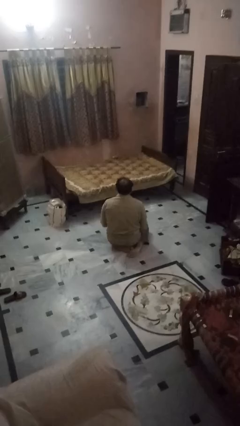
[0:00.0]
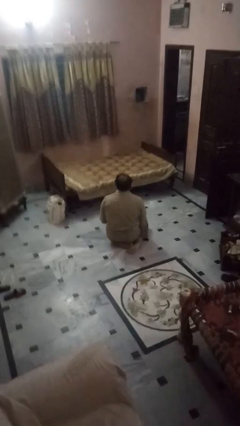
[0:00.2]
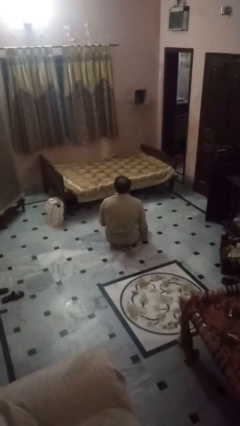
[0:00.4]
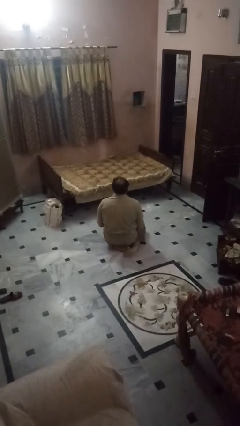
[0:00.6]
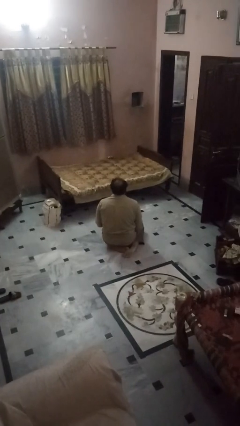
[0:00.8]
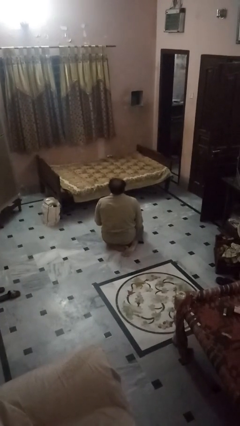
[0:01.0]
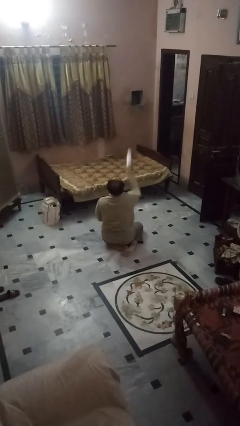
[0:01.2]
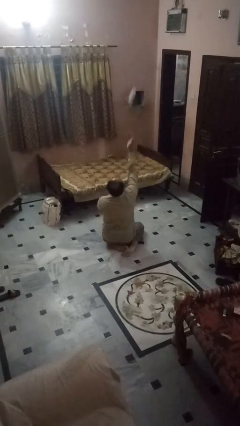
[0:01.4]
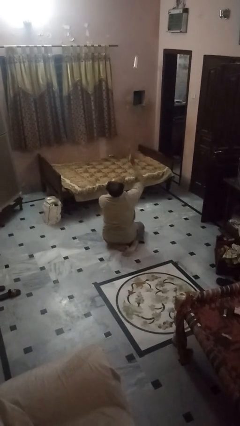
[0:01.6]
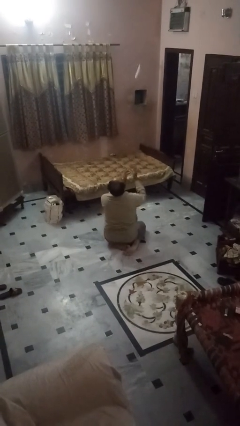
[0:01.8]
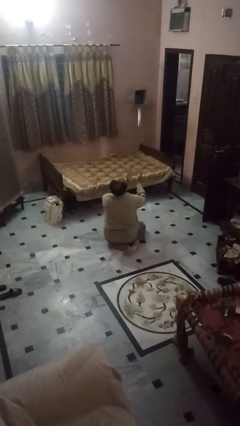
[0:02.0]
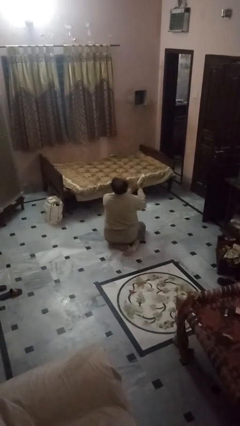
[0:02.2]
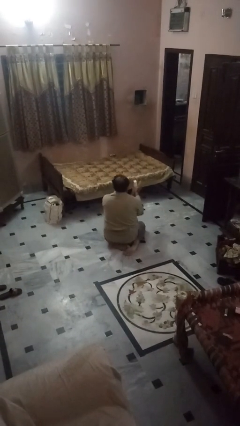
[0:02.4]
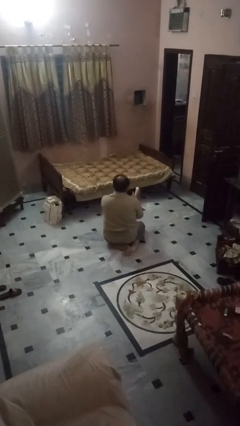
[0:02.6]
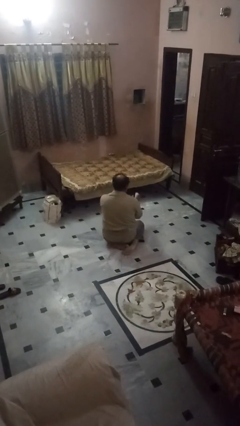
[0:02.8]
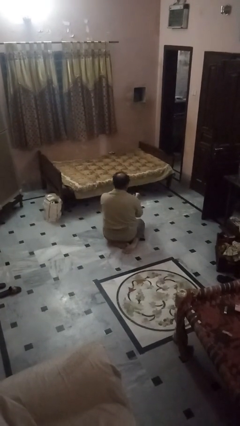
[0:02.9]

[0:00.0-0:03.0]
person drops object

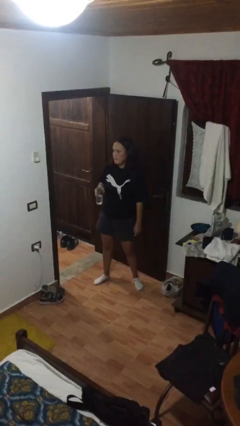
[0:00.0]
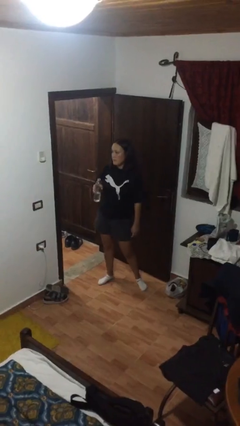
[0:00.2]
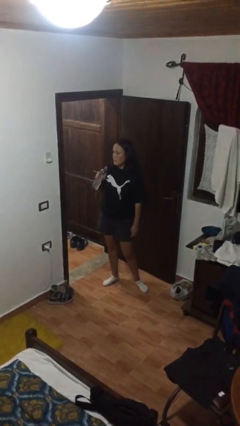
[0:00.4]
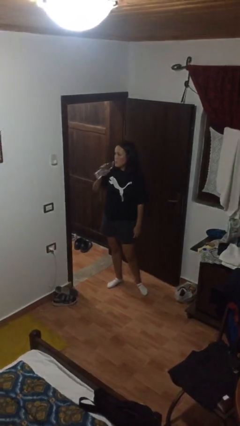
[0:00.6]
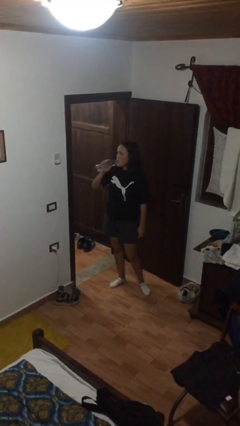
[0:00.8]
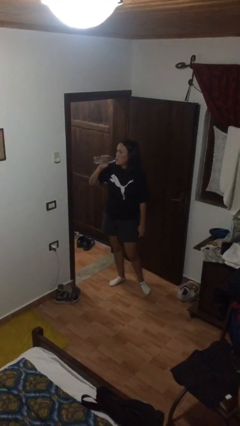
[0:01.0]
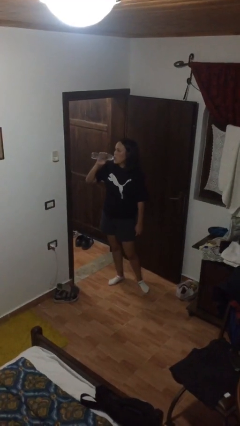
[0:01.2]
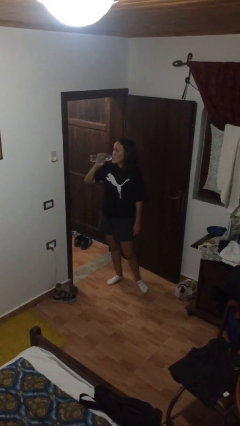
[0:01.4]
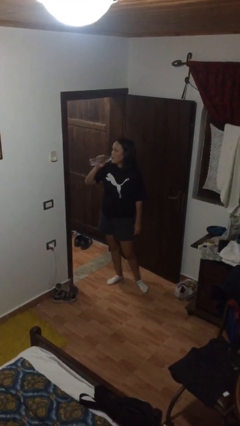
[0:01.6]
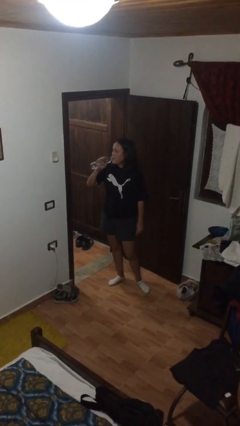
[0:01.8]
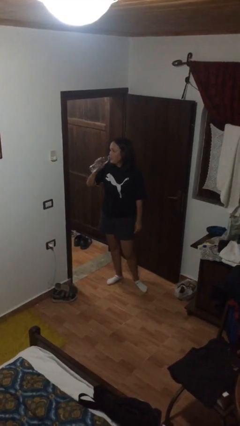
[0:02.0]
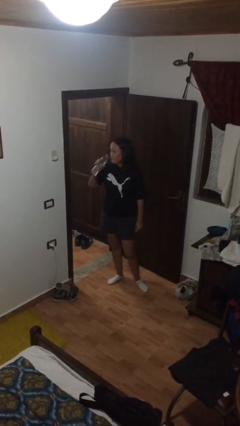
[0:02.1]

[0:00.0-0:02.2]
person drinks from bottle

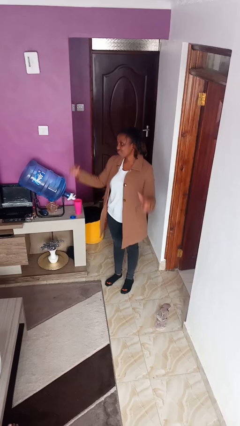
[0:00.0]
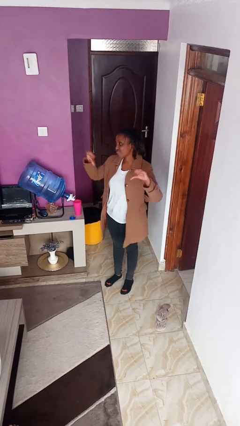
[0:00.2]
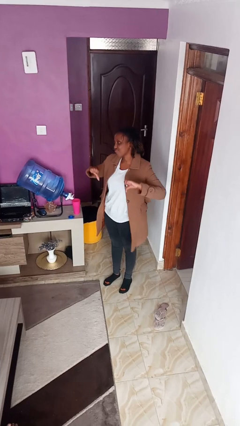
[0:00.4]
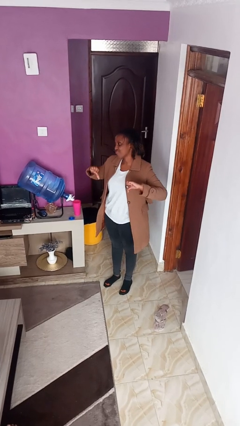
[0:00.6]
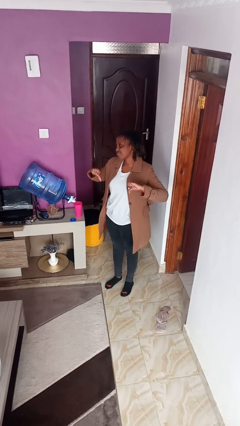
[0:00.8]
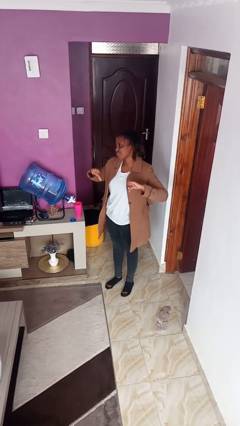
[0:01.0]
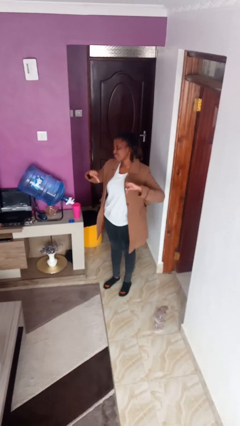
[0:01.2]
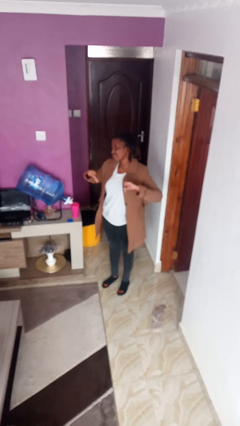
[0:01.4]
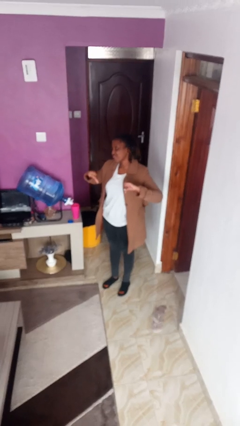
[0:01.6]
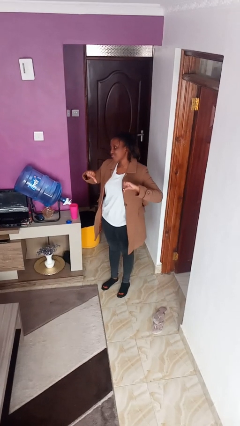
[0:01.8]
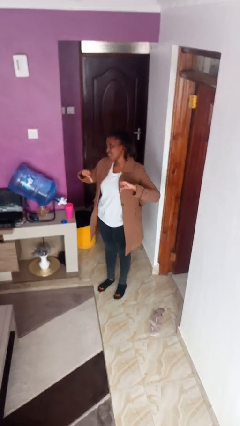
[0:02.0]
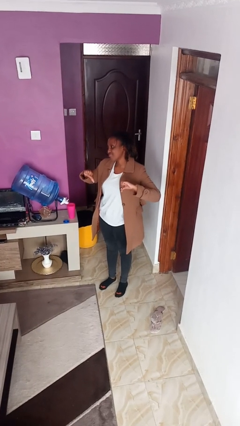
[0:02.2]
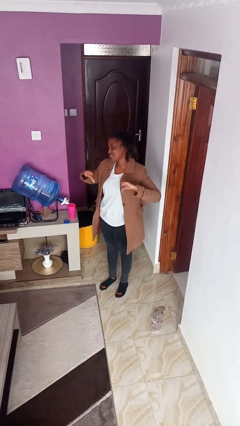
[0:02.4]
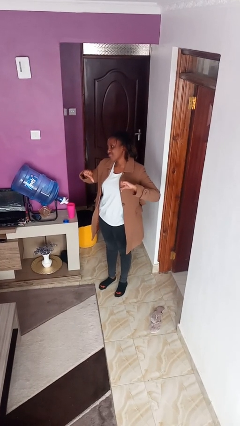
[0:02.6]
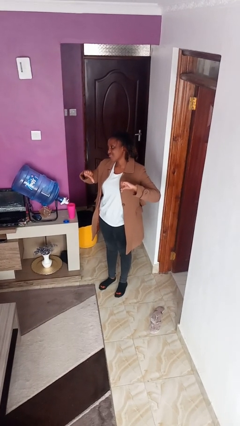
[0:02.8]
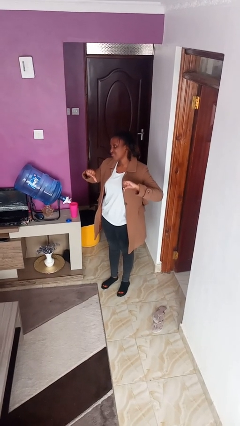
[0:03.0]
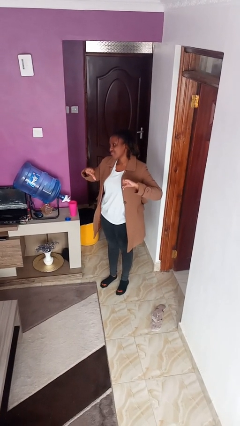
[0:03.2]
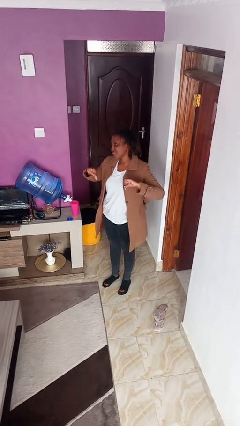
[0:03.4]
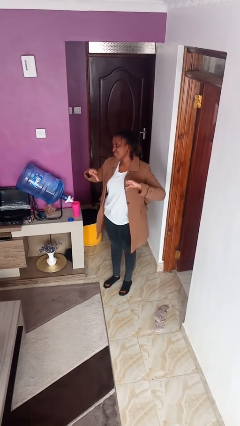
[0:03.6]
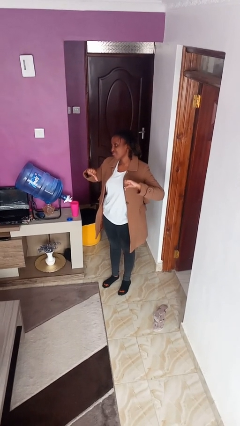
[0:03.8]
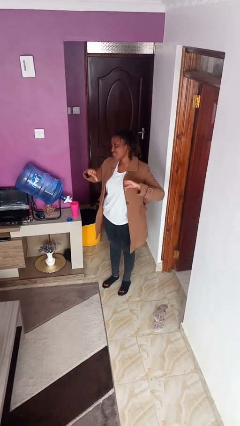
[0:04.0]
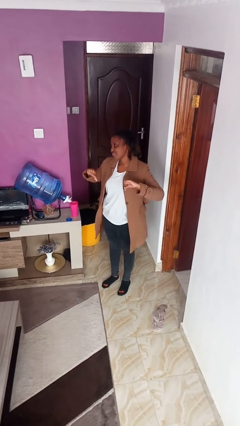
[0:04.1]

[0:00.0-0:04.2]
person gestures thumbs down

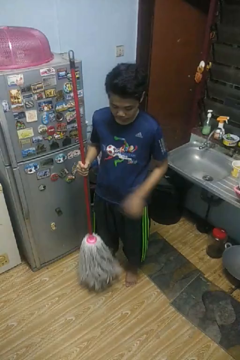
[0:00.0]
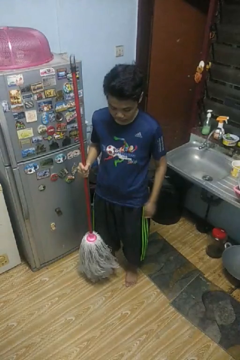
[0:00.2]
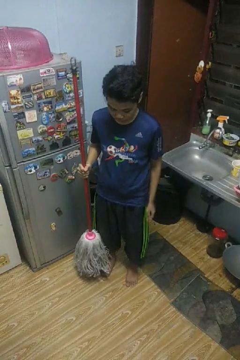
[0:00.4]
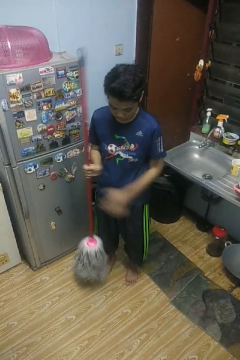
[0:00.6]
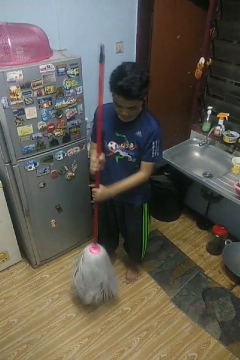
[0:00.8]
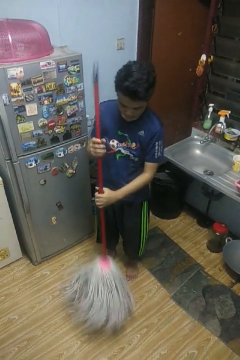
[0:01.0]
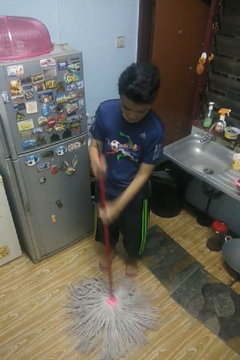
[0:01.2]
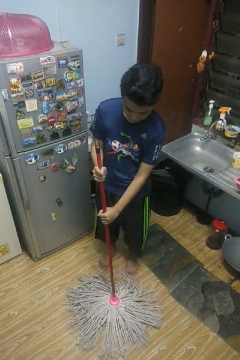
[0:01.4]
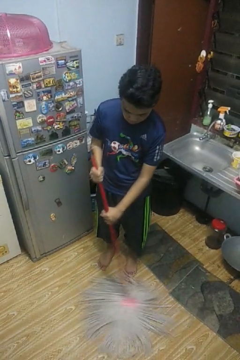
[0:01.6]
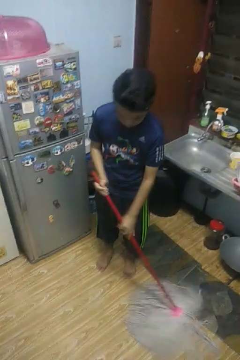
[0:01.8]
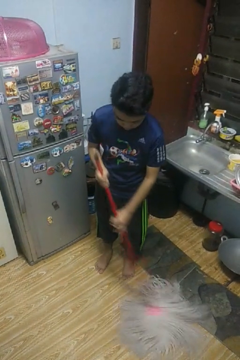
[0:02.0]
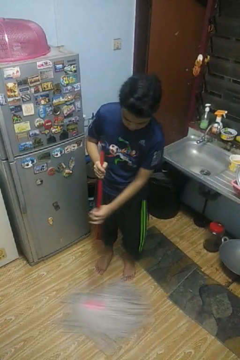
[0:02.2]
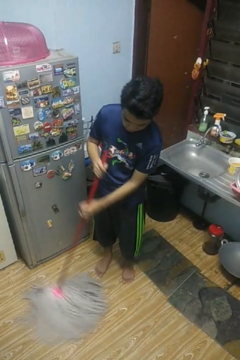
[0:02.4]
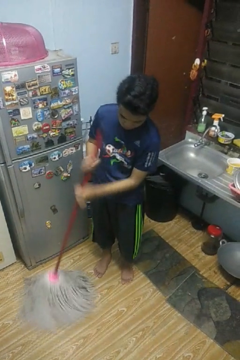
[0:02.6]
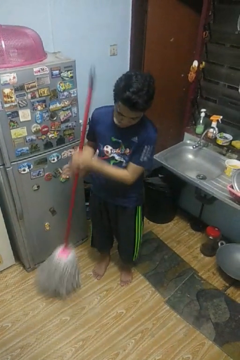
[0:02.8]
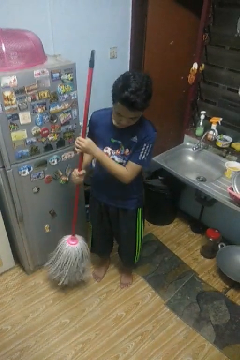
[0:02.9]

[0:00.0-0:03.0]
person mops

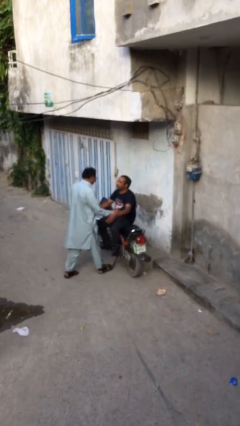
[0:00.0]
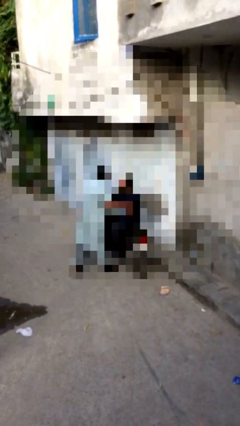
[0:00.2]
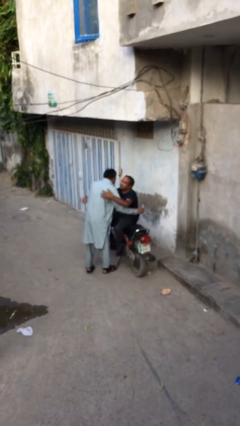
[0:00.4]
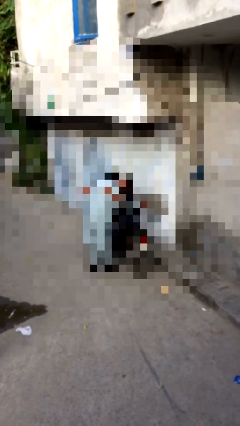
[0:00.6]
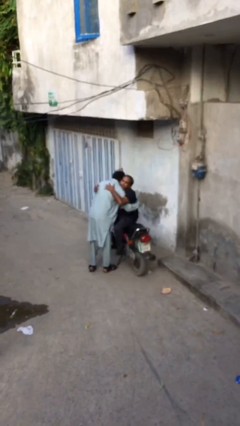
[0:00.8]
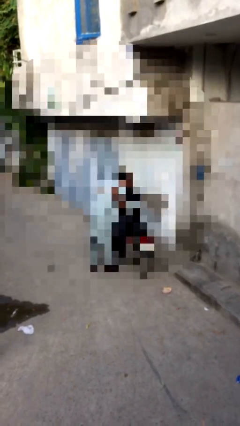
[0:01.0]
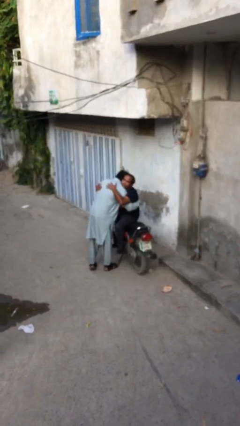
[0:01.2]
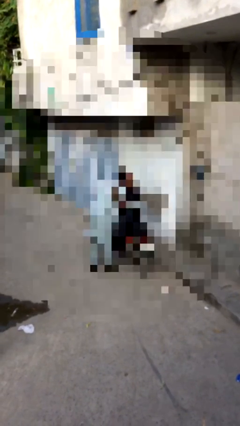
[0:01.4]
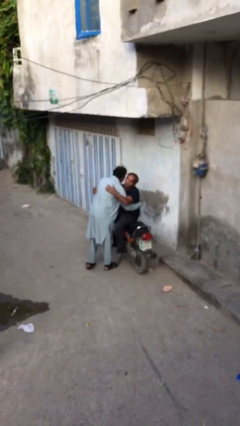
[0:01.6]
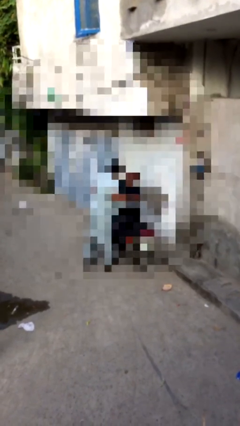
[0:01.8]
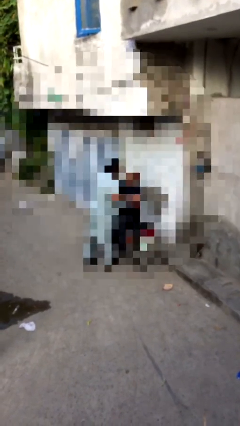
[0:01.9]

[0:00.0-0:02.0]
person embraces person

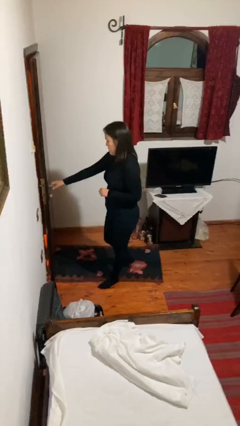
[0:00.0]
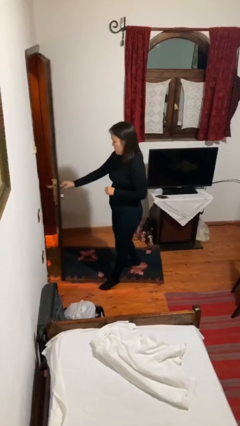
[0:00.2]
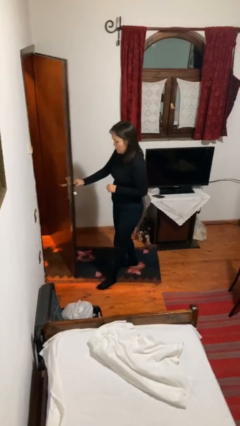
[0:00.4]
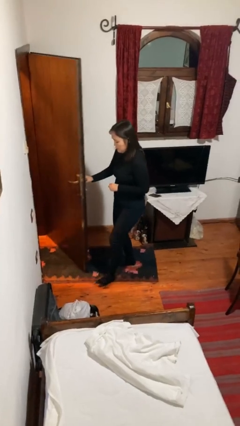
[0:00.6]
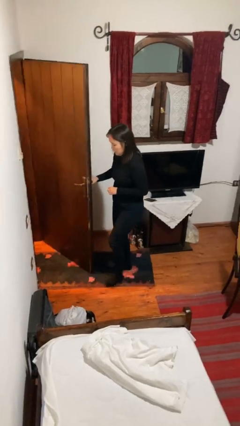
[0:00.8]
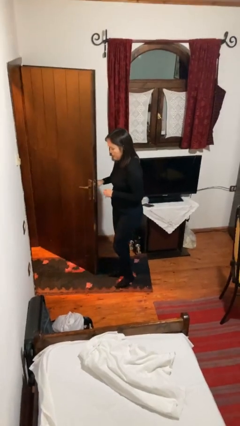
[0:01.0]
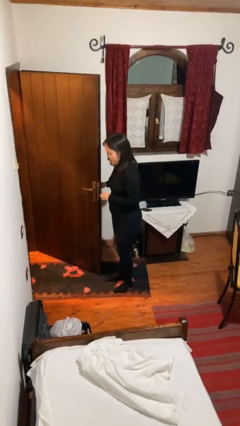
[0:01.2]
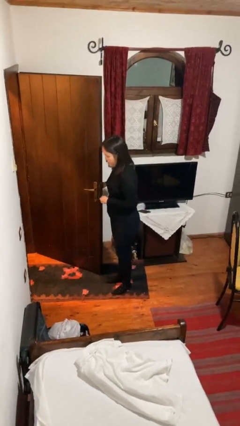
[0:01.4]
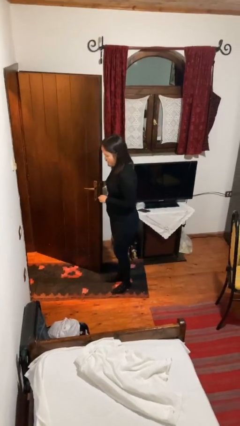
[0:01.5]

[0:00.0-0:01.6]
person opens facility door

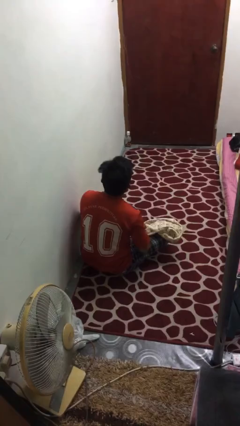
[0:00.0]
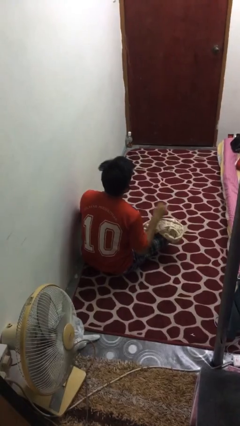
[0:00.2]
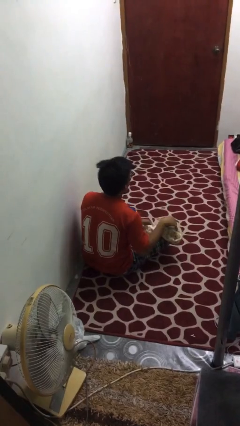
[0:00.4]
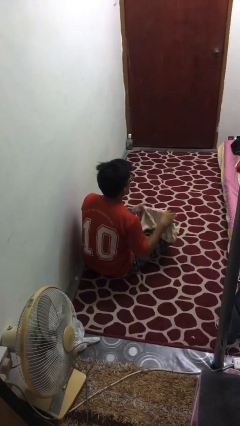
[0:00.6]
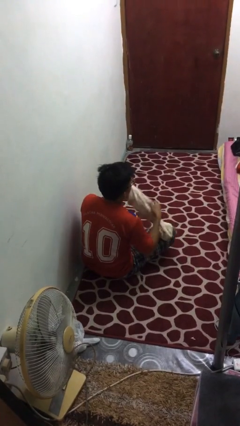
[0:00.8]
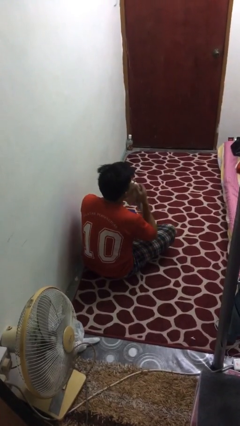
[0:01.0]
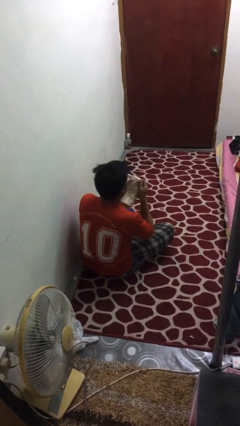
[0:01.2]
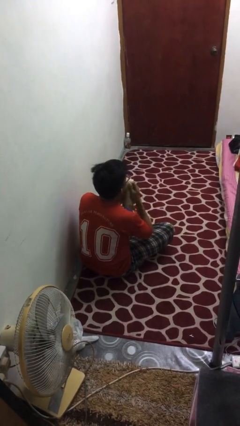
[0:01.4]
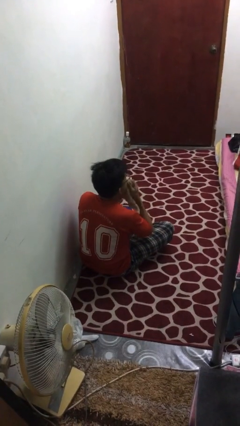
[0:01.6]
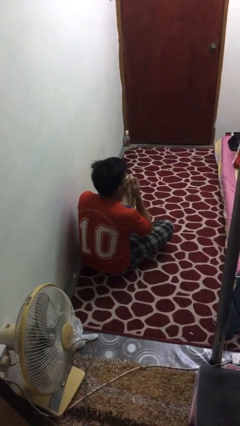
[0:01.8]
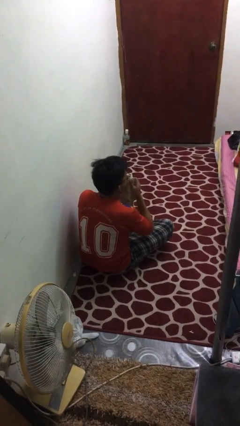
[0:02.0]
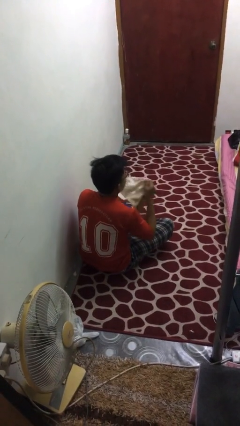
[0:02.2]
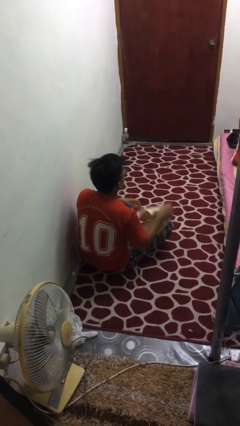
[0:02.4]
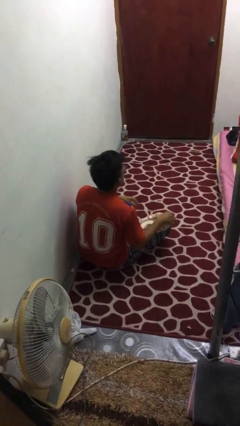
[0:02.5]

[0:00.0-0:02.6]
person wipes mouth with napkin
